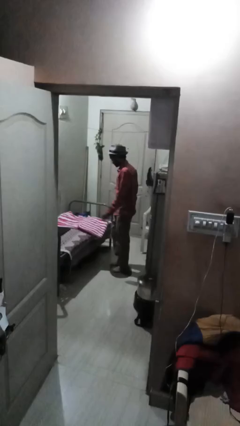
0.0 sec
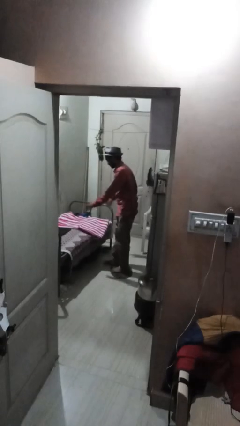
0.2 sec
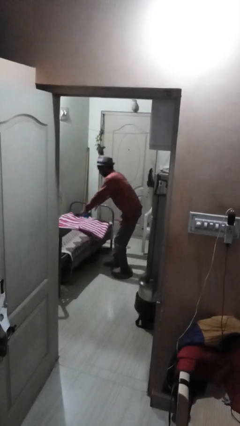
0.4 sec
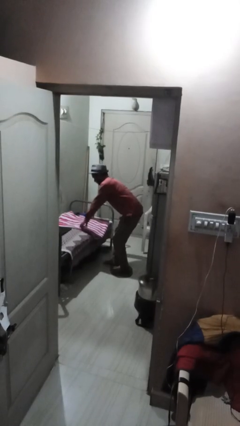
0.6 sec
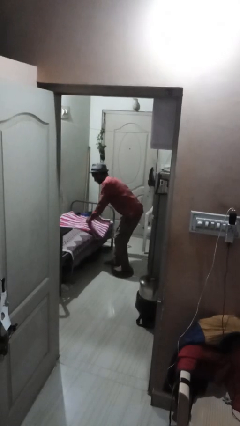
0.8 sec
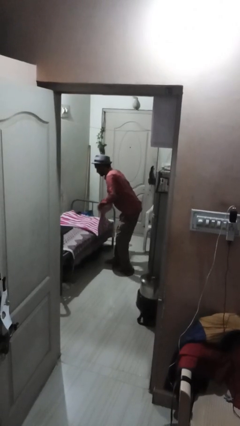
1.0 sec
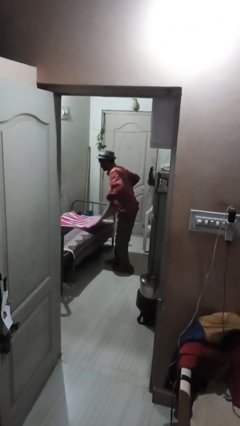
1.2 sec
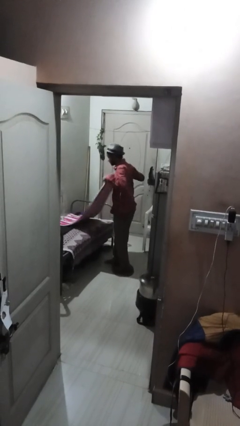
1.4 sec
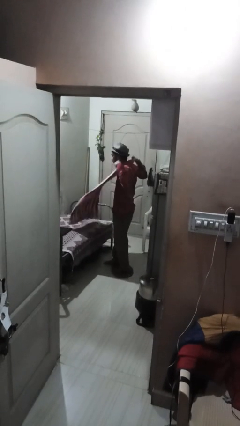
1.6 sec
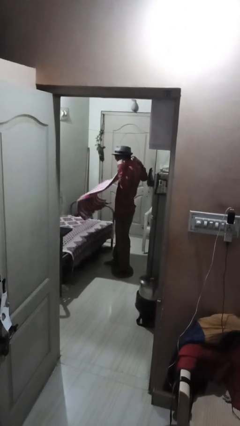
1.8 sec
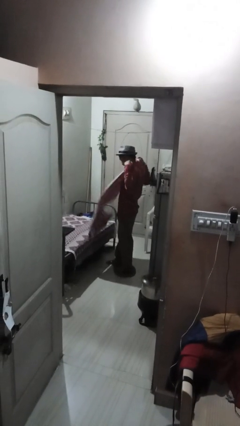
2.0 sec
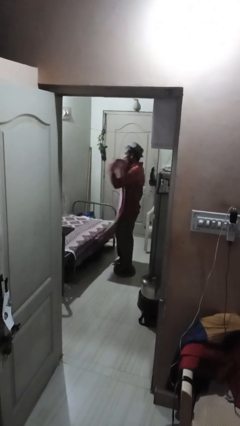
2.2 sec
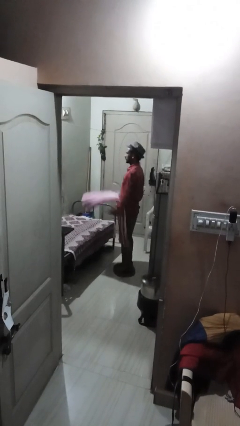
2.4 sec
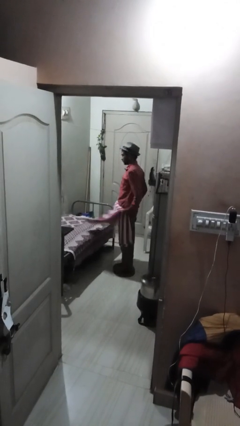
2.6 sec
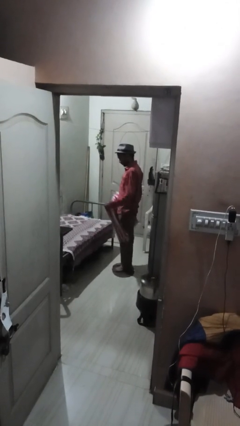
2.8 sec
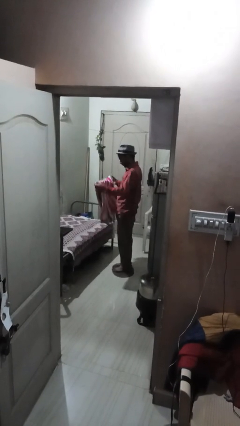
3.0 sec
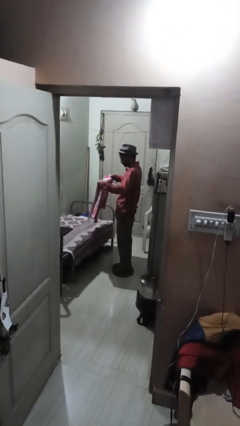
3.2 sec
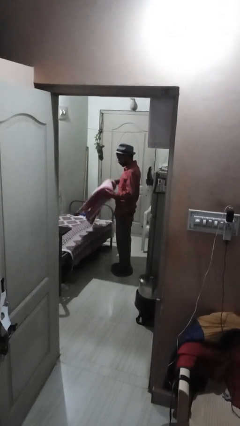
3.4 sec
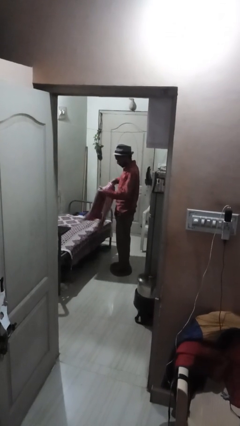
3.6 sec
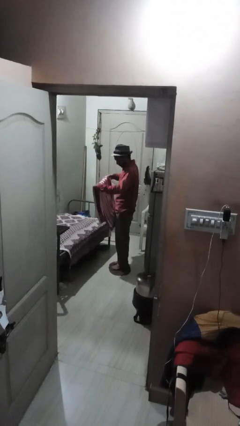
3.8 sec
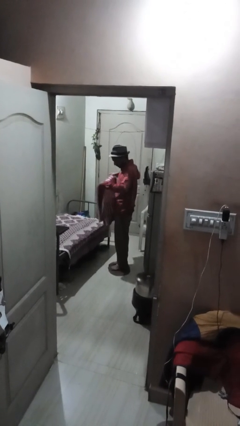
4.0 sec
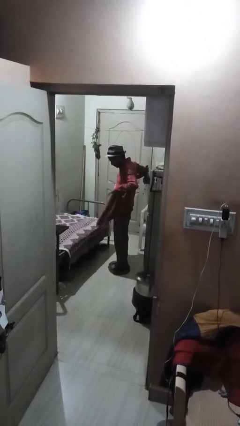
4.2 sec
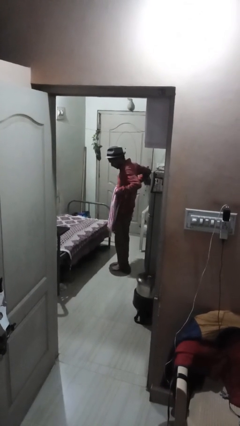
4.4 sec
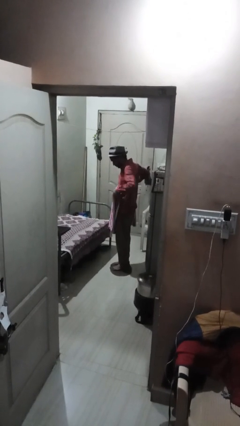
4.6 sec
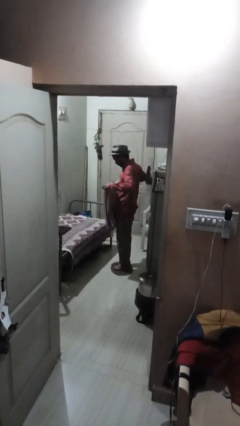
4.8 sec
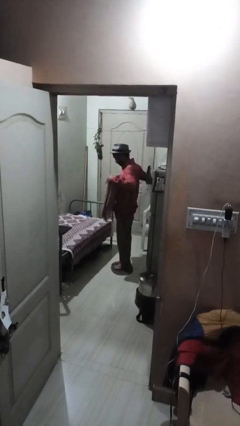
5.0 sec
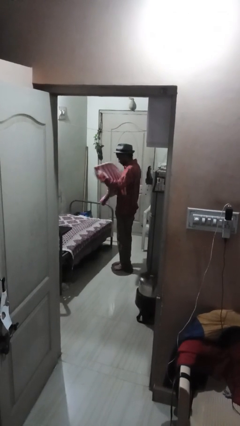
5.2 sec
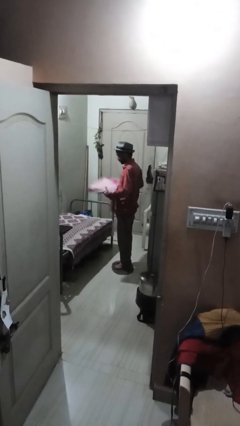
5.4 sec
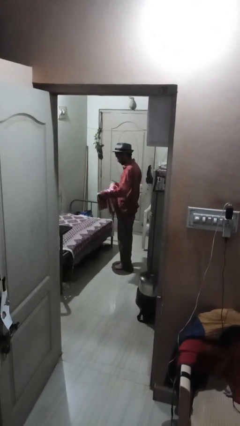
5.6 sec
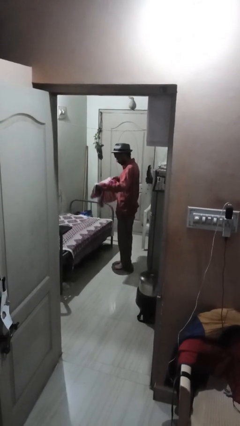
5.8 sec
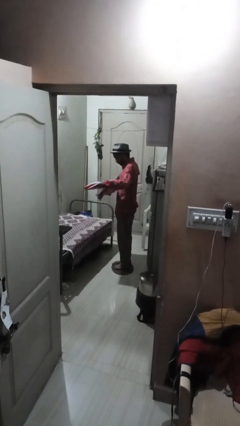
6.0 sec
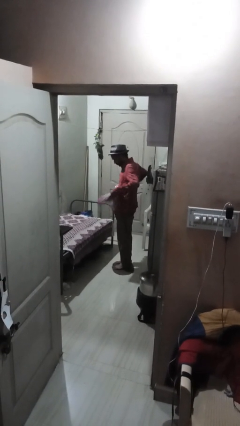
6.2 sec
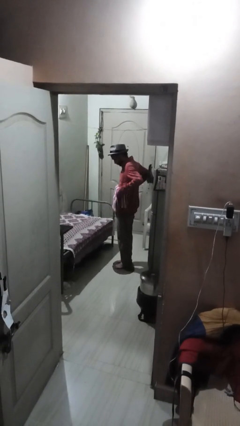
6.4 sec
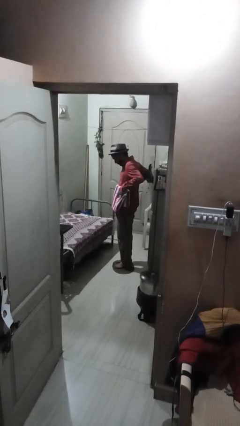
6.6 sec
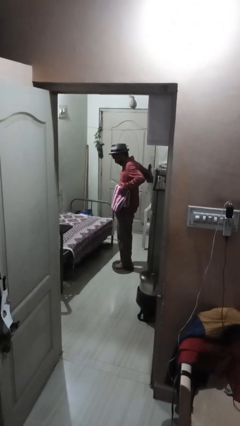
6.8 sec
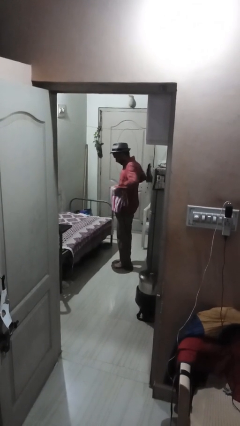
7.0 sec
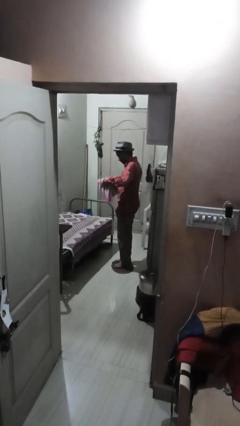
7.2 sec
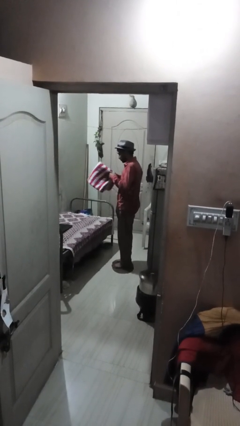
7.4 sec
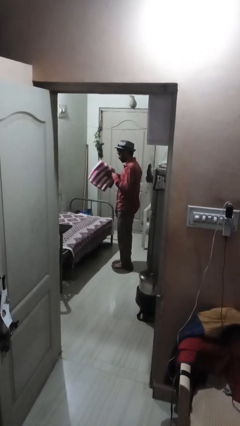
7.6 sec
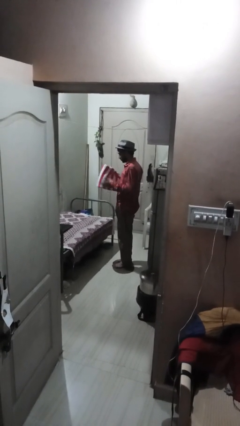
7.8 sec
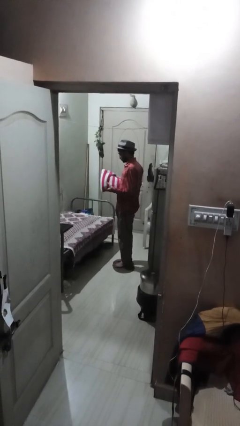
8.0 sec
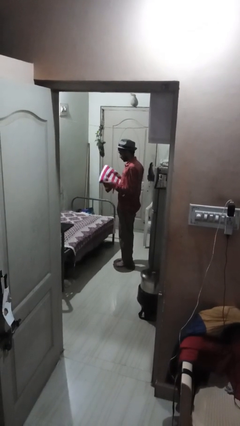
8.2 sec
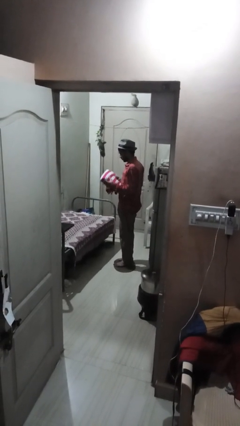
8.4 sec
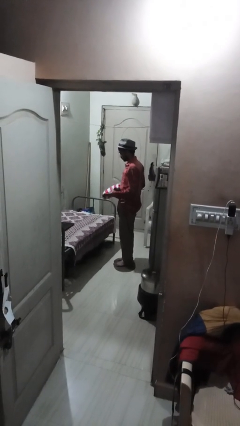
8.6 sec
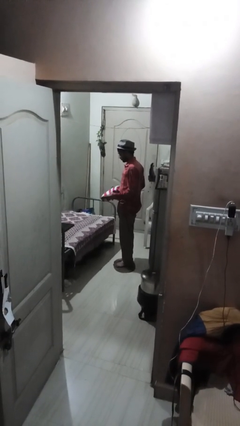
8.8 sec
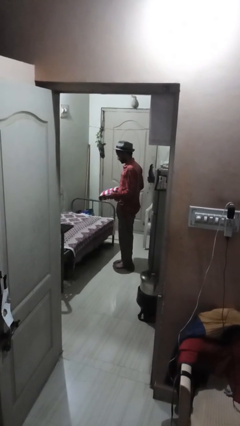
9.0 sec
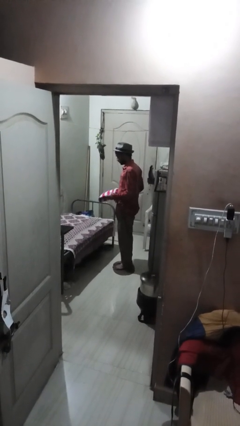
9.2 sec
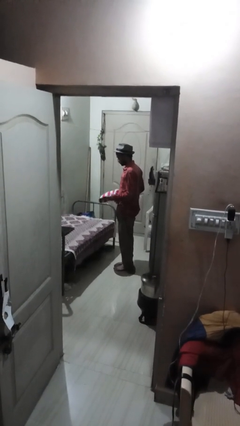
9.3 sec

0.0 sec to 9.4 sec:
person folds blanket

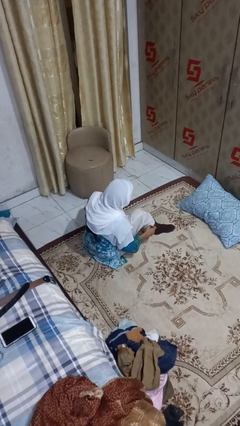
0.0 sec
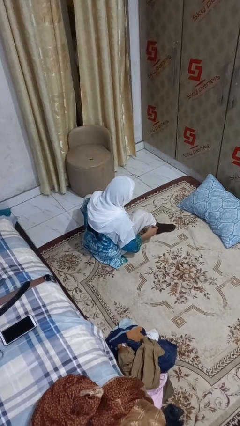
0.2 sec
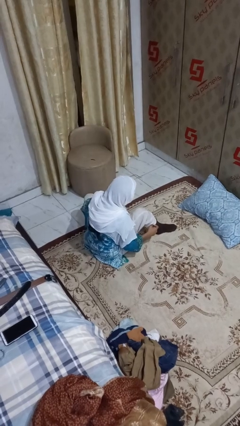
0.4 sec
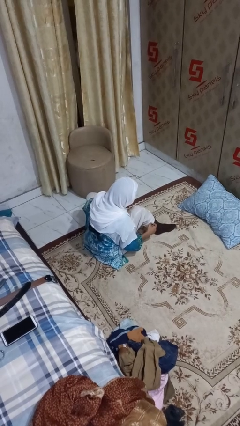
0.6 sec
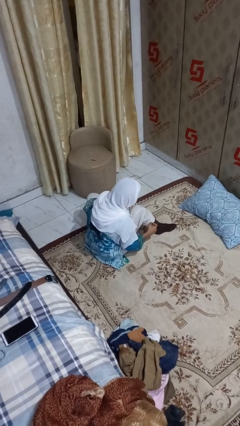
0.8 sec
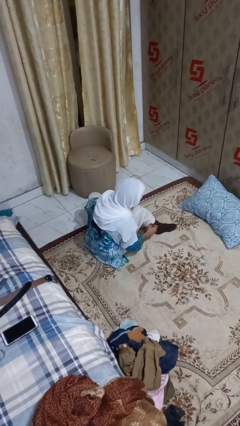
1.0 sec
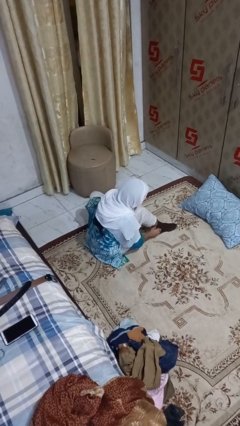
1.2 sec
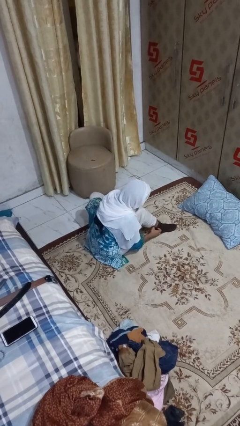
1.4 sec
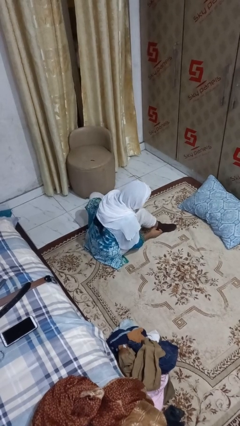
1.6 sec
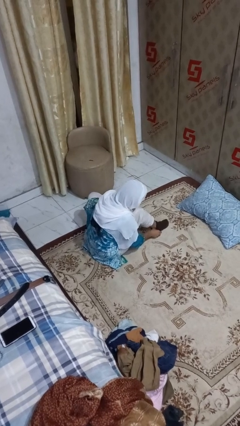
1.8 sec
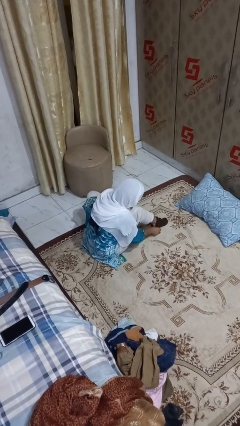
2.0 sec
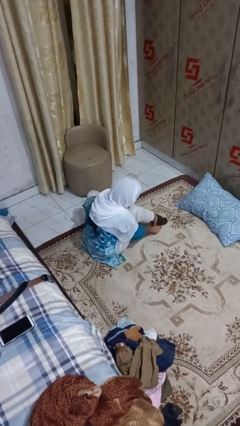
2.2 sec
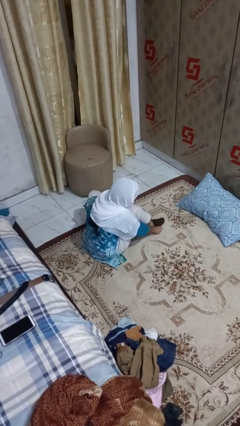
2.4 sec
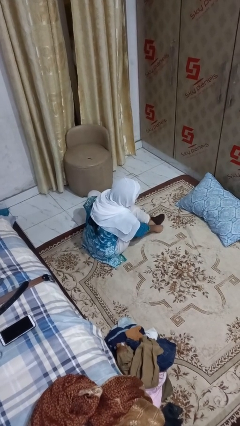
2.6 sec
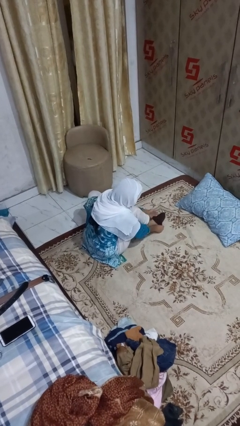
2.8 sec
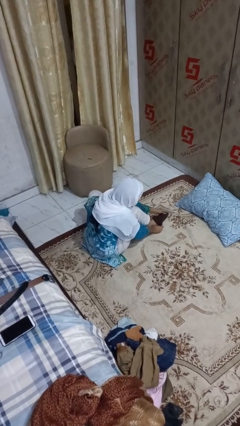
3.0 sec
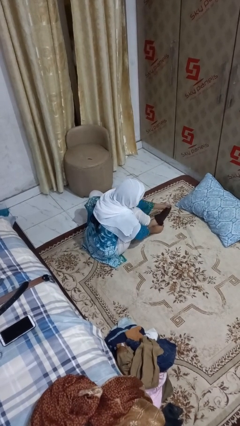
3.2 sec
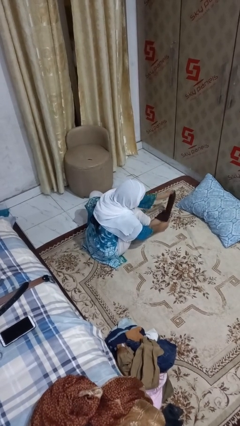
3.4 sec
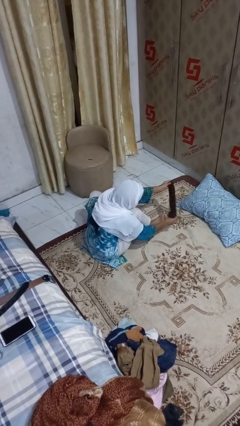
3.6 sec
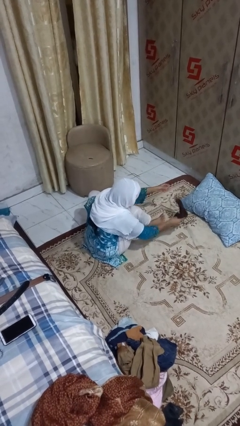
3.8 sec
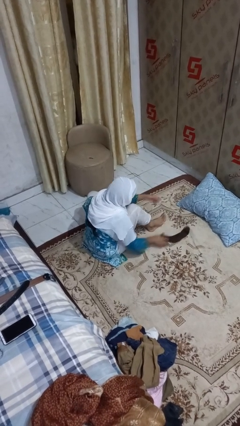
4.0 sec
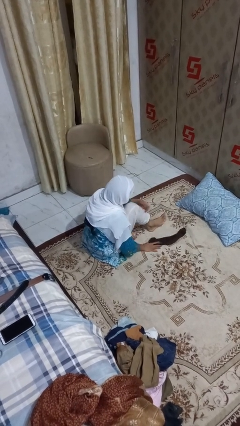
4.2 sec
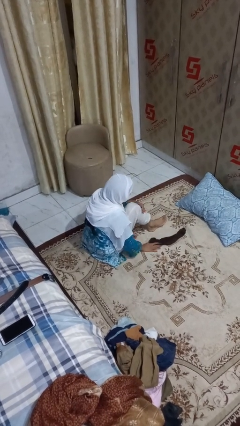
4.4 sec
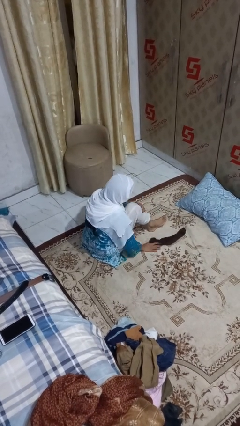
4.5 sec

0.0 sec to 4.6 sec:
person takes off socks

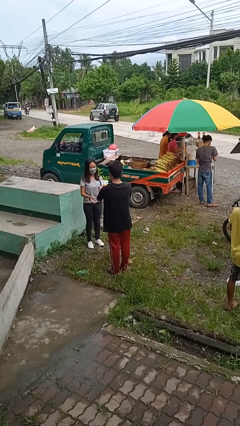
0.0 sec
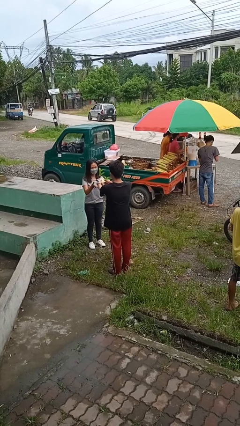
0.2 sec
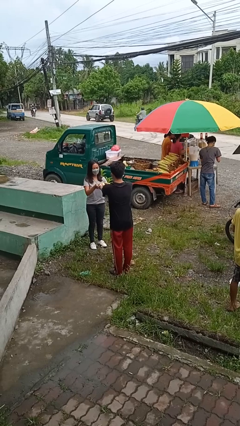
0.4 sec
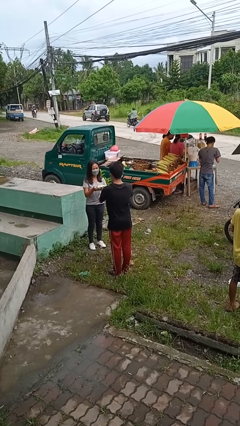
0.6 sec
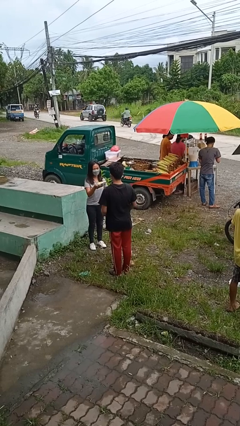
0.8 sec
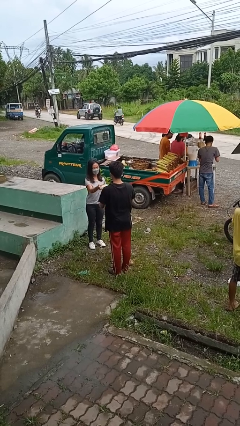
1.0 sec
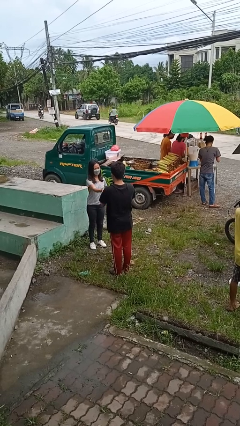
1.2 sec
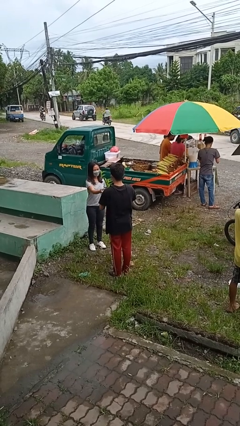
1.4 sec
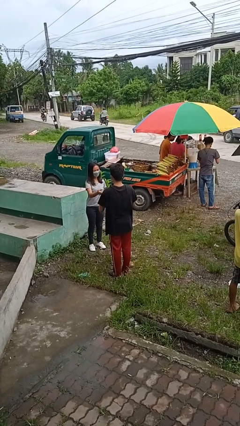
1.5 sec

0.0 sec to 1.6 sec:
person transfers object to person

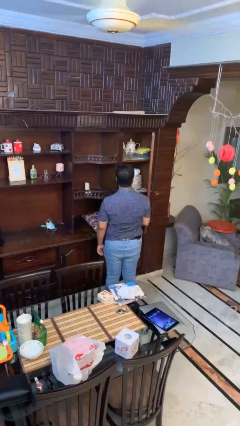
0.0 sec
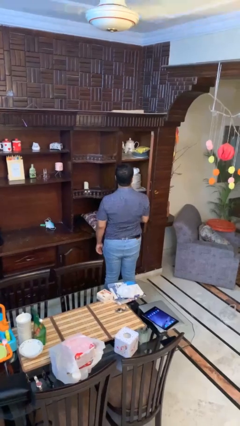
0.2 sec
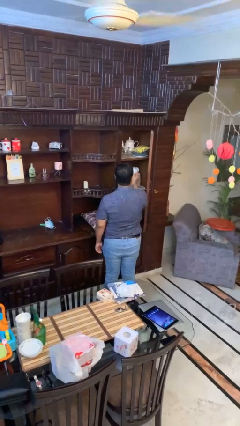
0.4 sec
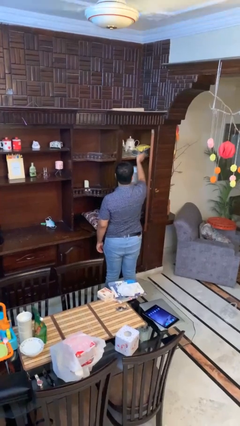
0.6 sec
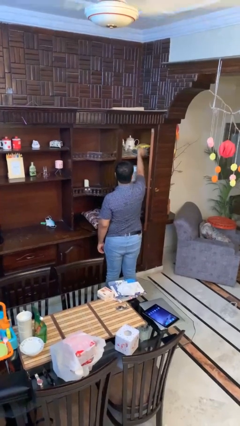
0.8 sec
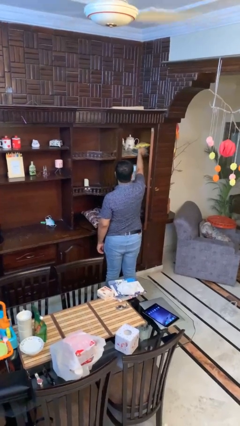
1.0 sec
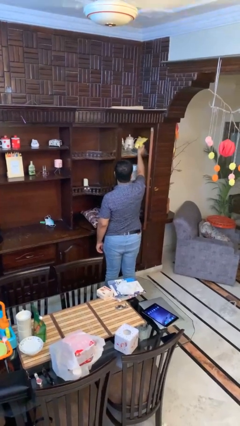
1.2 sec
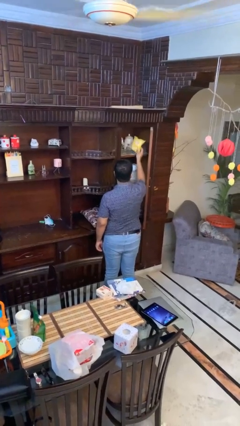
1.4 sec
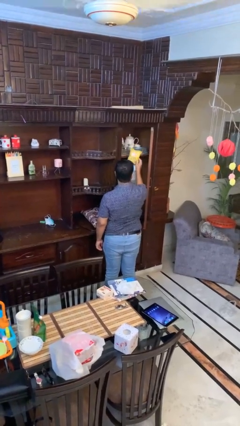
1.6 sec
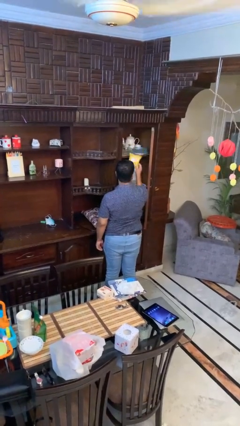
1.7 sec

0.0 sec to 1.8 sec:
person picks up object from cabinet

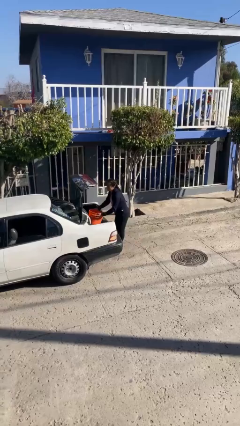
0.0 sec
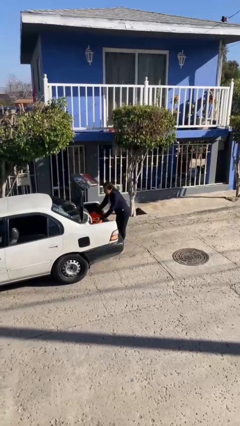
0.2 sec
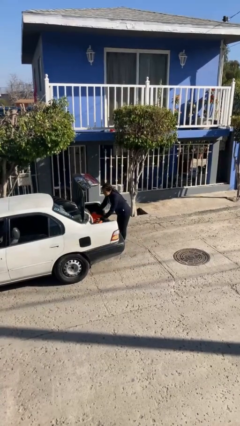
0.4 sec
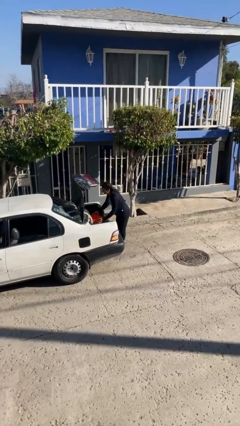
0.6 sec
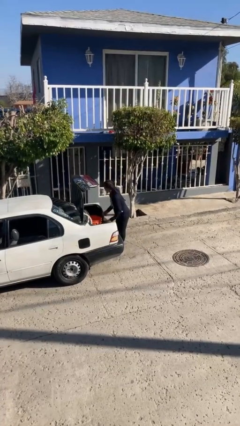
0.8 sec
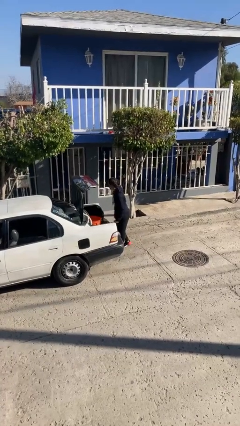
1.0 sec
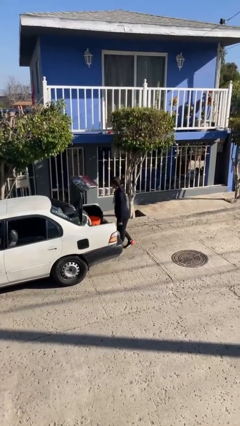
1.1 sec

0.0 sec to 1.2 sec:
person loads car
